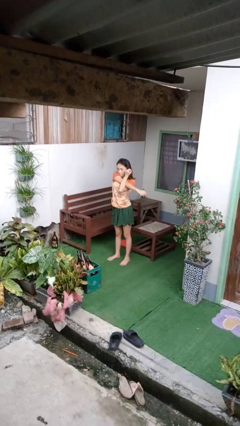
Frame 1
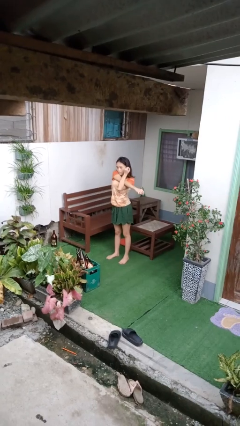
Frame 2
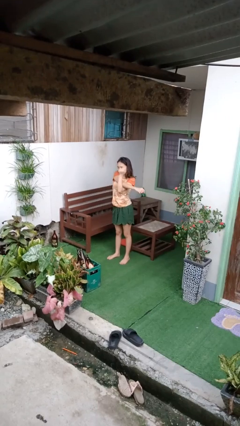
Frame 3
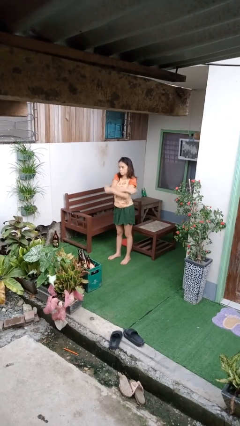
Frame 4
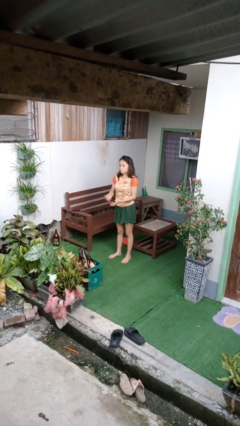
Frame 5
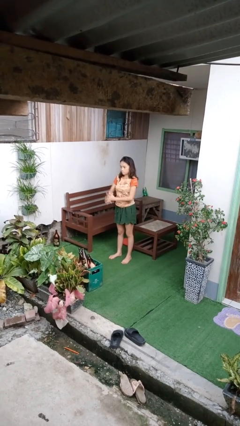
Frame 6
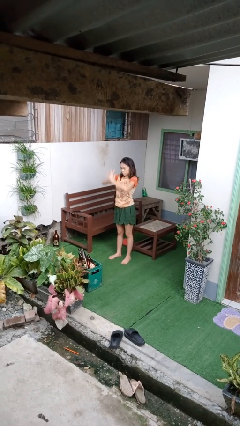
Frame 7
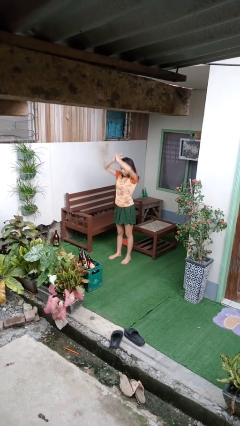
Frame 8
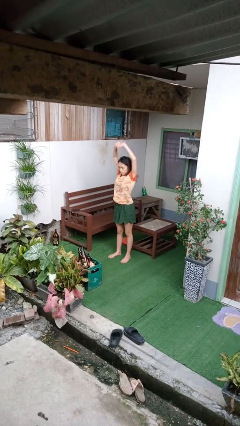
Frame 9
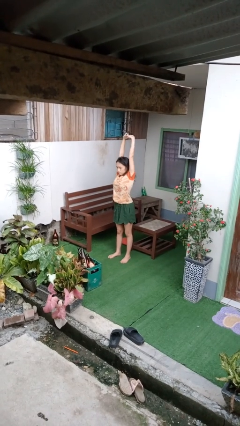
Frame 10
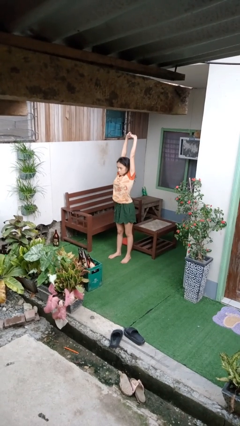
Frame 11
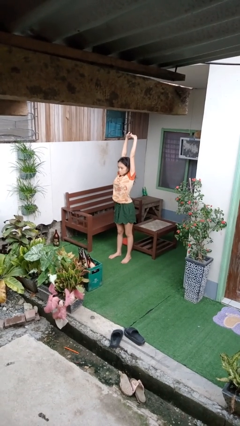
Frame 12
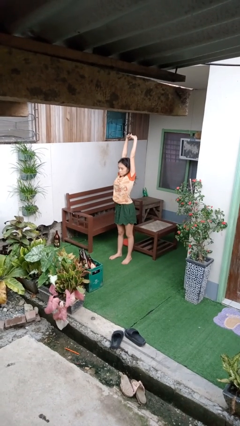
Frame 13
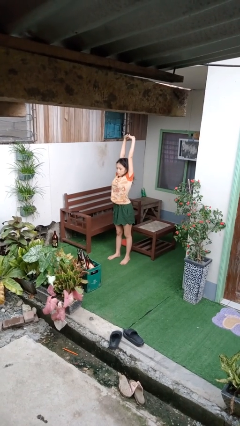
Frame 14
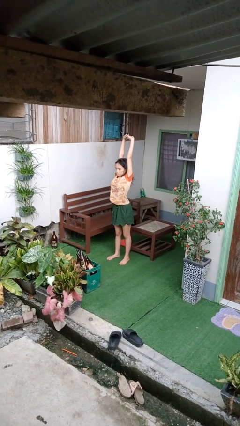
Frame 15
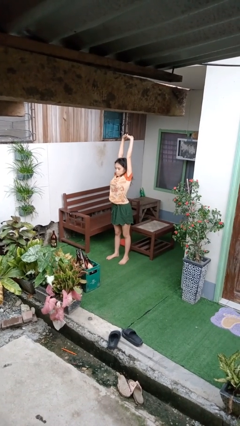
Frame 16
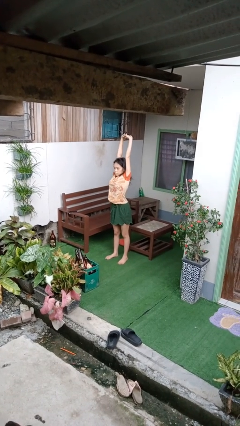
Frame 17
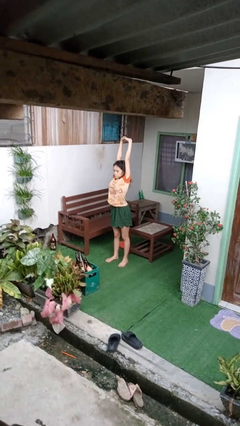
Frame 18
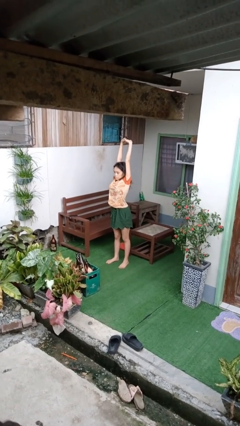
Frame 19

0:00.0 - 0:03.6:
person stretches arms over head

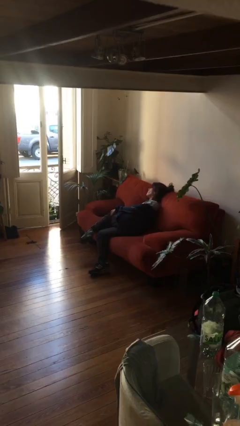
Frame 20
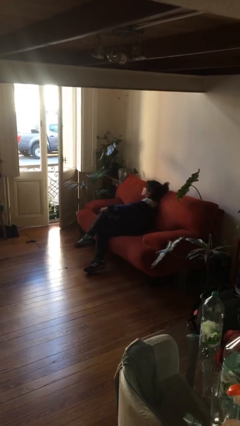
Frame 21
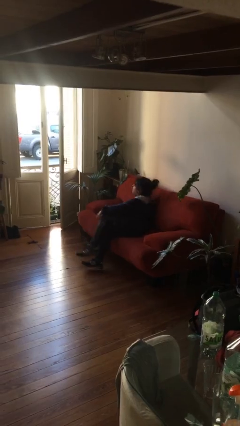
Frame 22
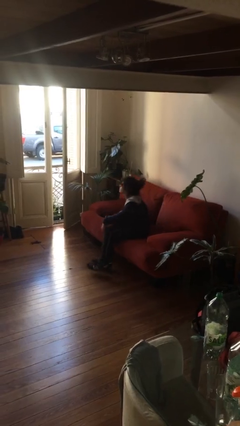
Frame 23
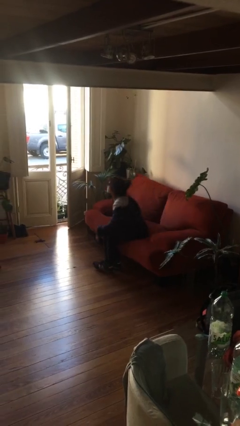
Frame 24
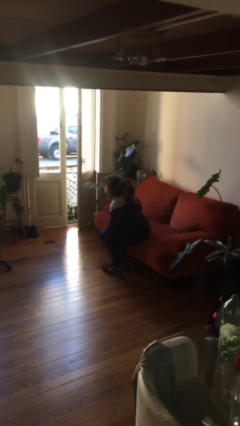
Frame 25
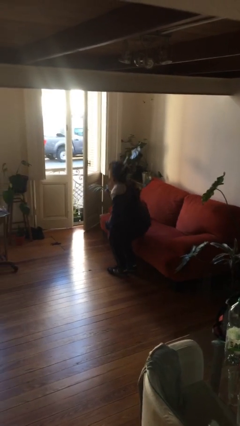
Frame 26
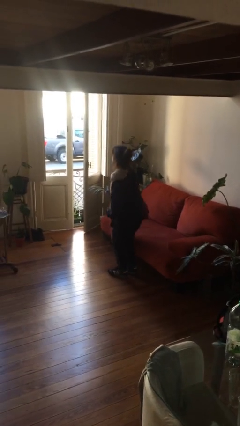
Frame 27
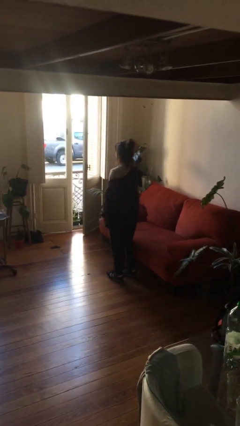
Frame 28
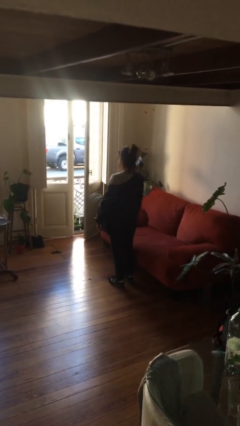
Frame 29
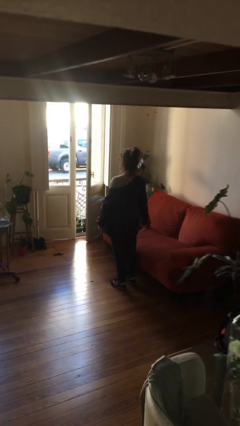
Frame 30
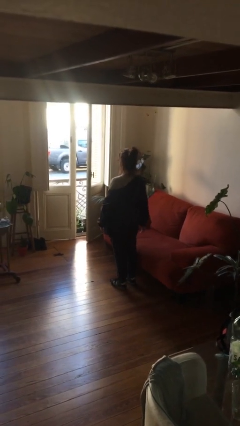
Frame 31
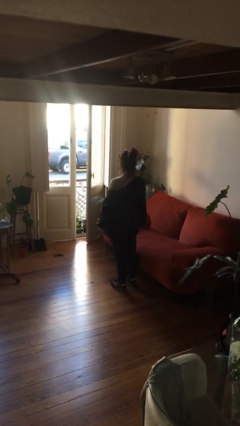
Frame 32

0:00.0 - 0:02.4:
person stands up

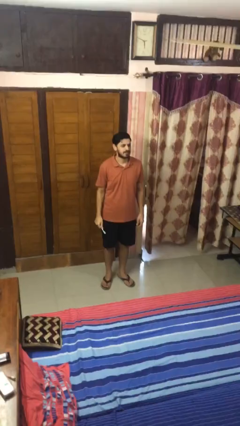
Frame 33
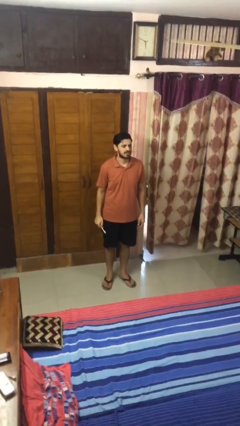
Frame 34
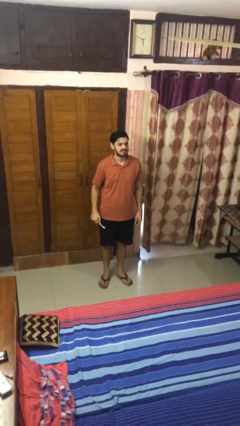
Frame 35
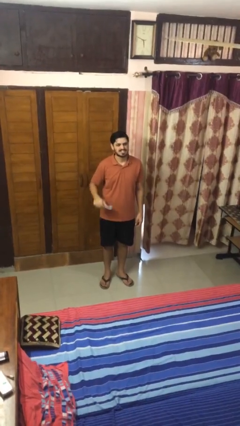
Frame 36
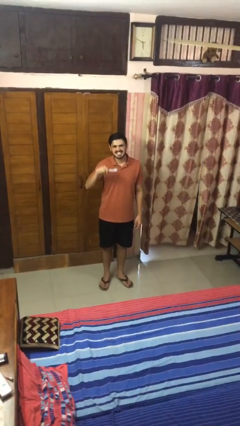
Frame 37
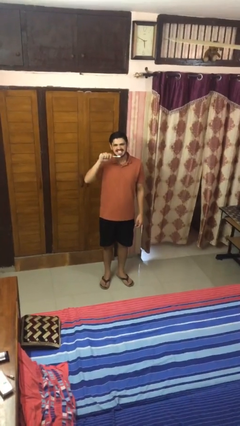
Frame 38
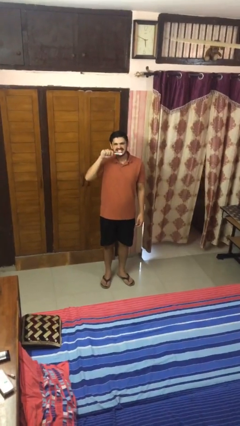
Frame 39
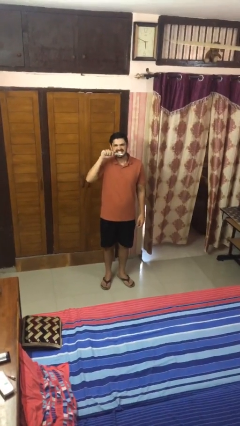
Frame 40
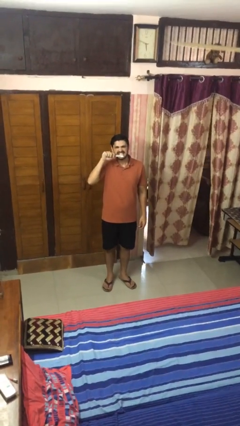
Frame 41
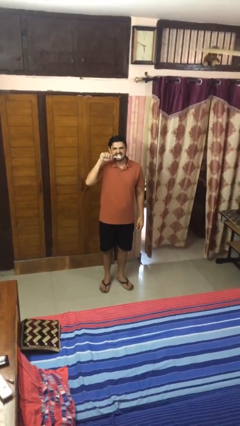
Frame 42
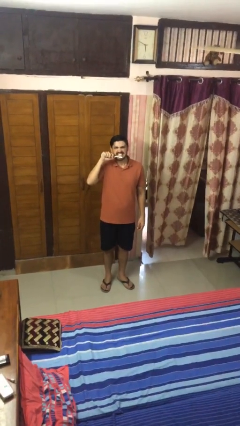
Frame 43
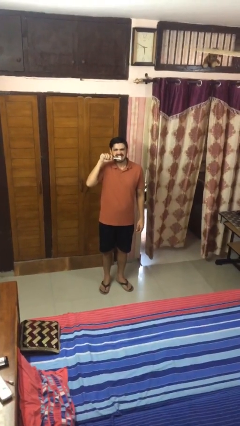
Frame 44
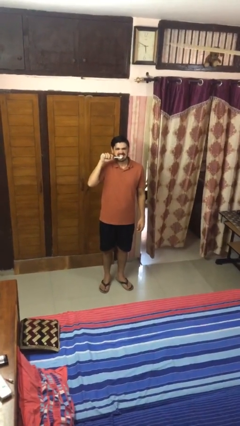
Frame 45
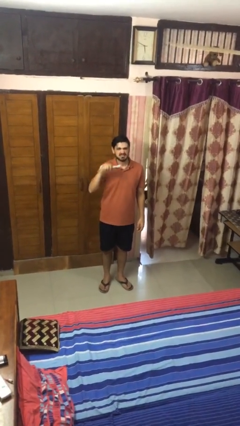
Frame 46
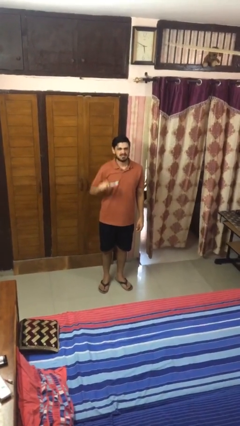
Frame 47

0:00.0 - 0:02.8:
person brushes teeth

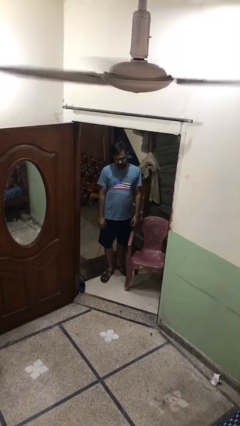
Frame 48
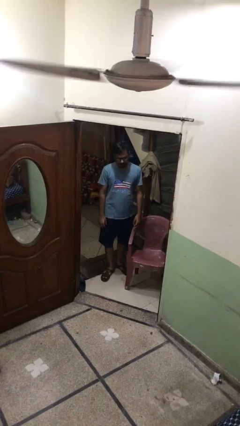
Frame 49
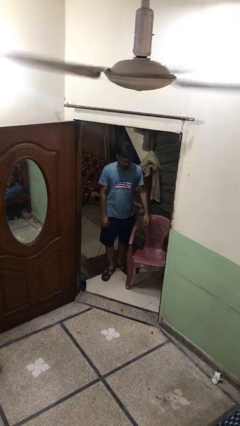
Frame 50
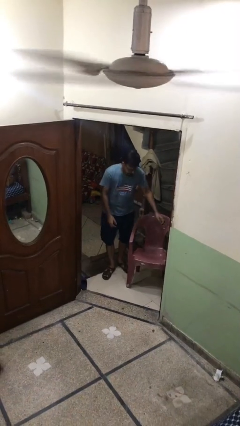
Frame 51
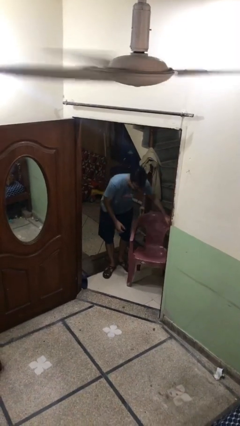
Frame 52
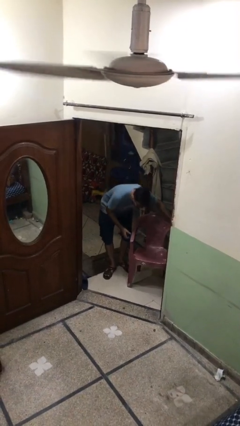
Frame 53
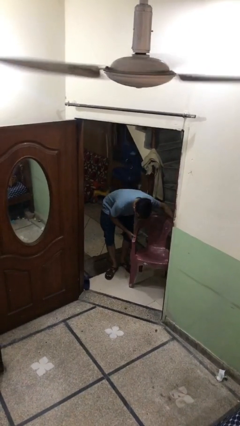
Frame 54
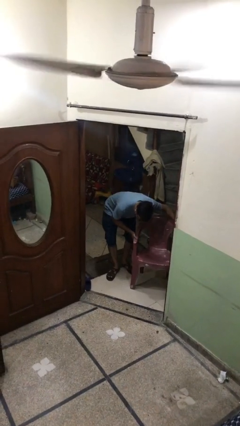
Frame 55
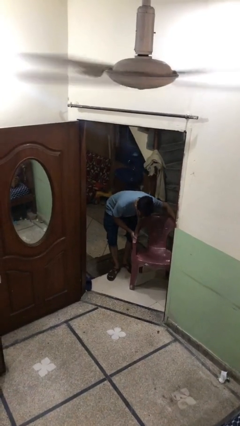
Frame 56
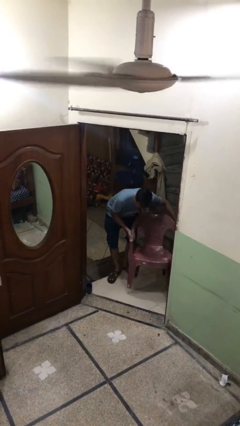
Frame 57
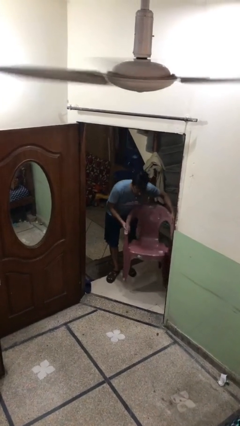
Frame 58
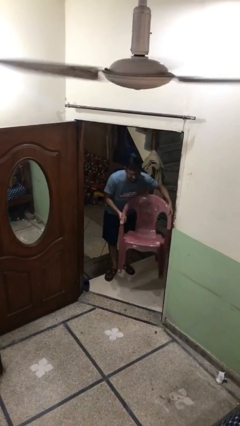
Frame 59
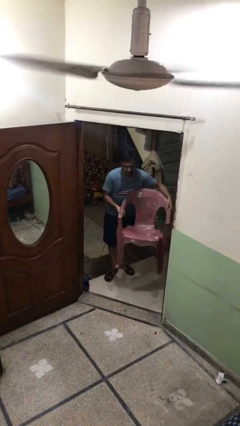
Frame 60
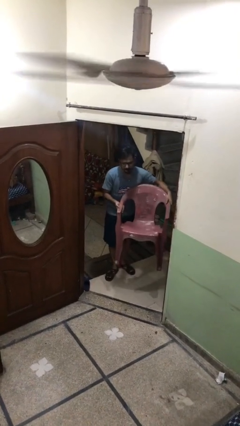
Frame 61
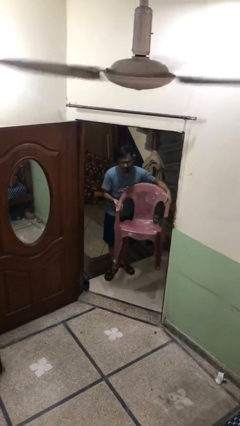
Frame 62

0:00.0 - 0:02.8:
person picks up object from floor

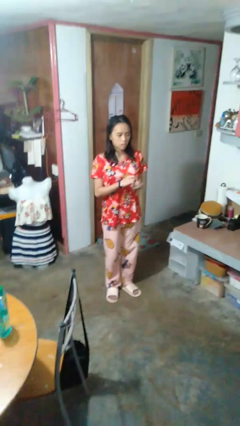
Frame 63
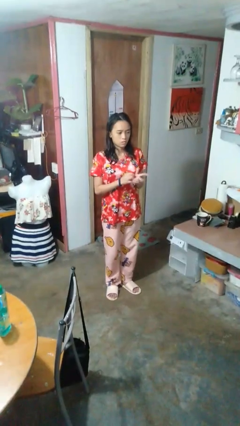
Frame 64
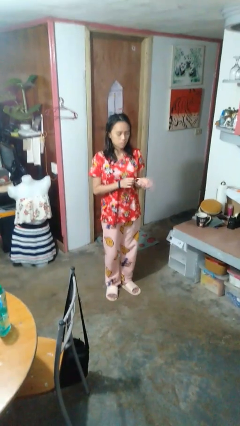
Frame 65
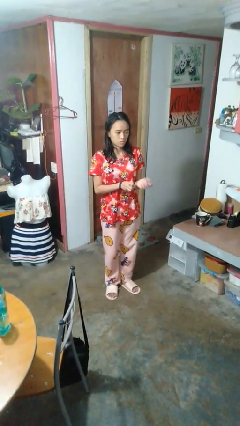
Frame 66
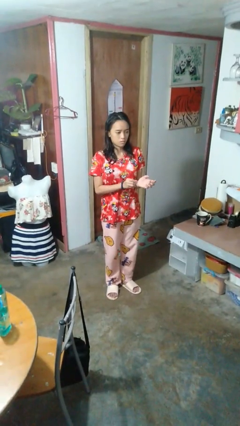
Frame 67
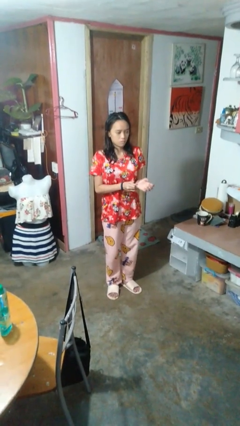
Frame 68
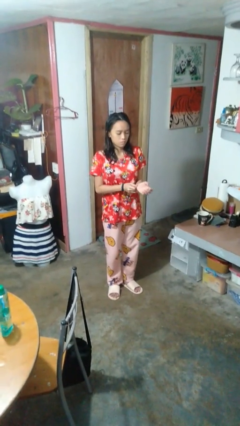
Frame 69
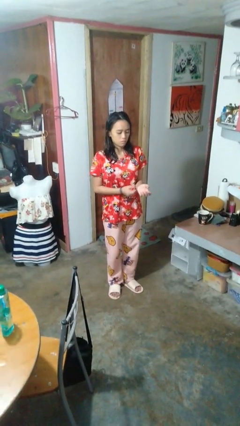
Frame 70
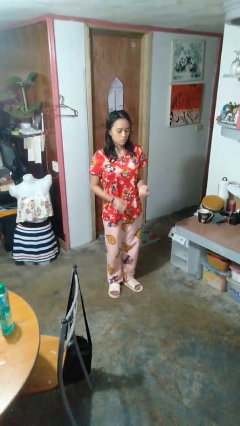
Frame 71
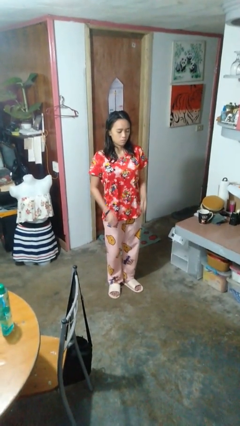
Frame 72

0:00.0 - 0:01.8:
person puts on wristwatch

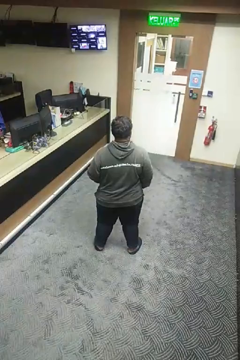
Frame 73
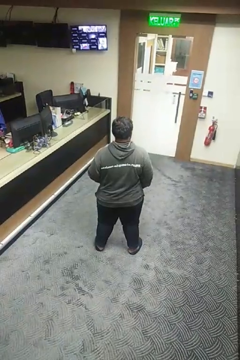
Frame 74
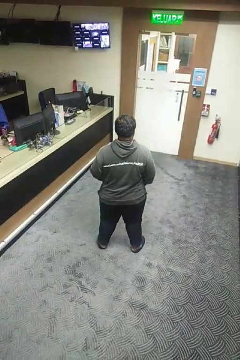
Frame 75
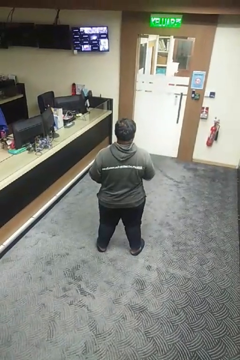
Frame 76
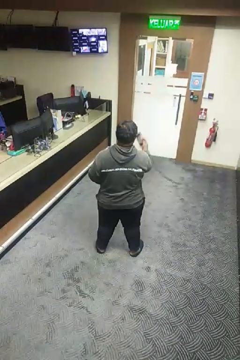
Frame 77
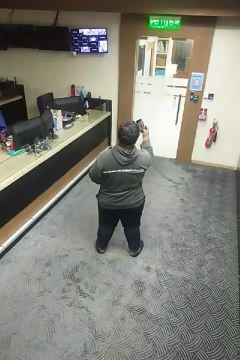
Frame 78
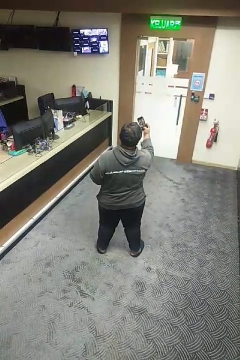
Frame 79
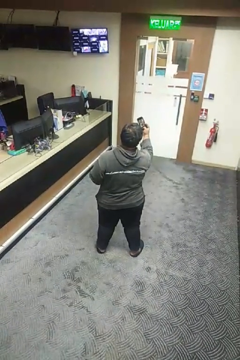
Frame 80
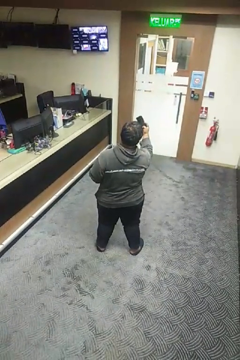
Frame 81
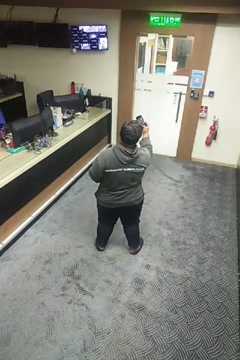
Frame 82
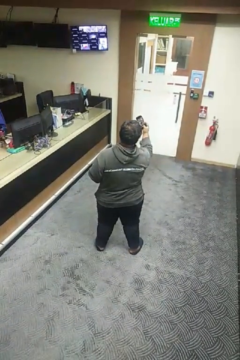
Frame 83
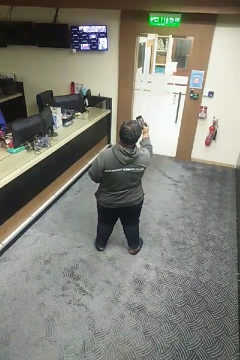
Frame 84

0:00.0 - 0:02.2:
person takes selfie

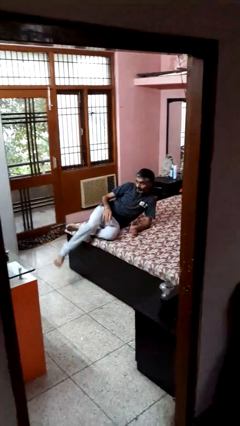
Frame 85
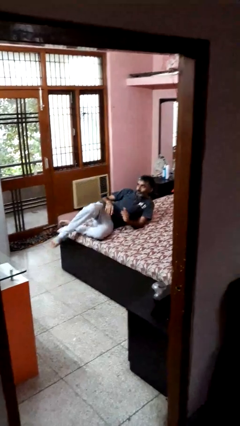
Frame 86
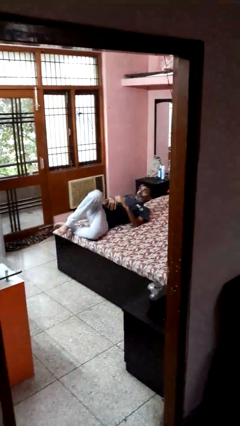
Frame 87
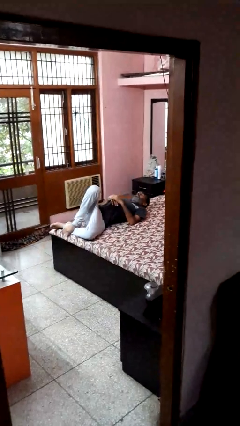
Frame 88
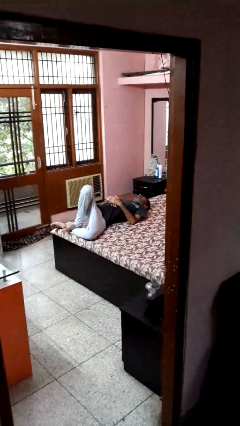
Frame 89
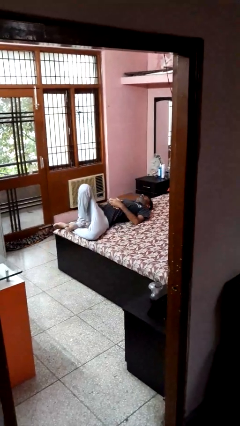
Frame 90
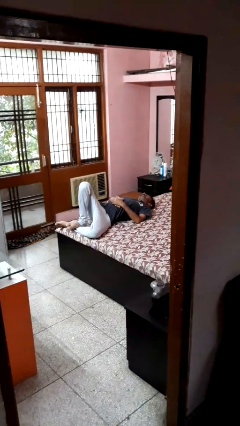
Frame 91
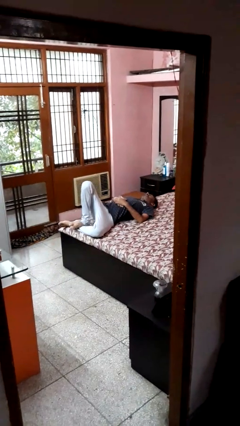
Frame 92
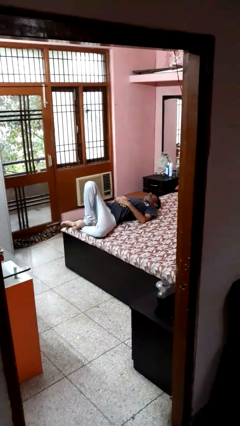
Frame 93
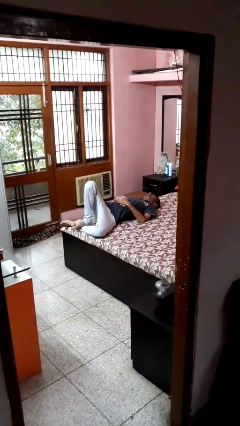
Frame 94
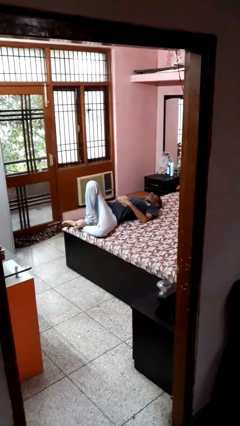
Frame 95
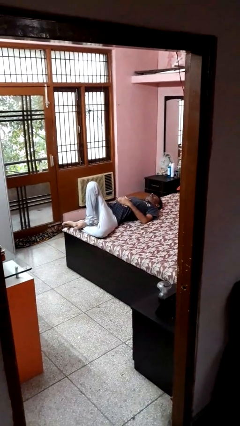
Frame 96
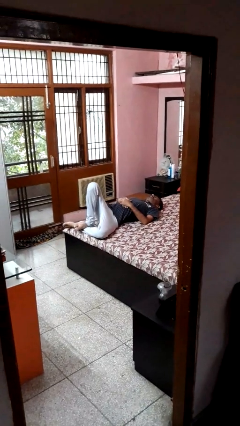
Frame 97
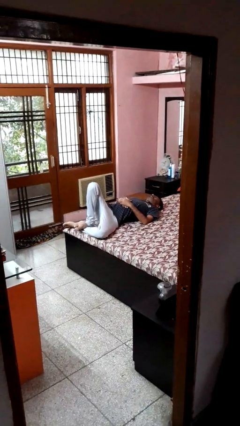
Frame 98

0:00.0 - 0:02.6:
person lies down on bed
